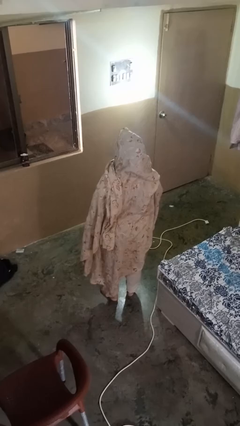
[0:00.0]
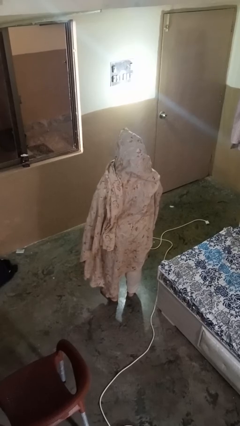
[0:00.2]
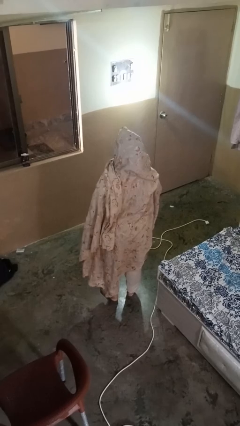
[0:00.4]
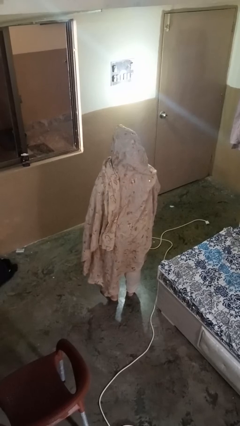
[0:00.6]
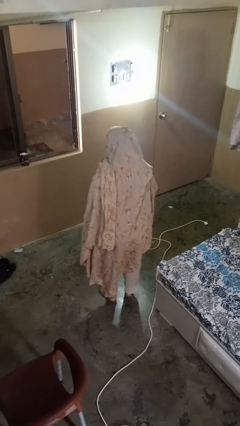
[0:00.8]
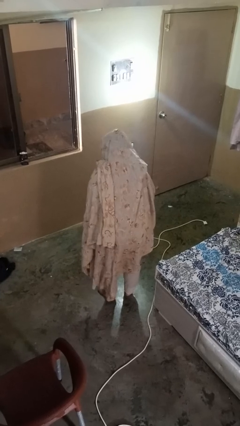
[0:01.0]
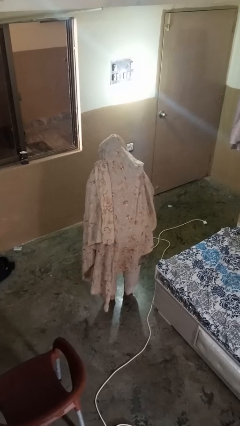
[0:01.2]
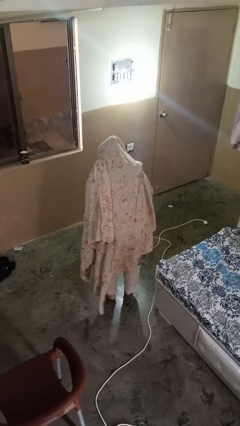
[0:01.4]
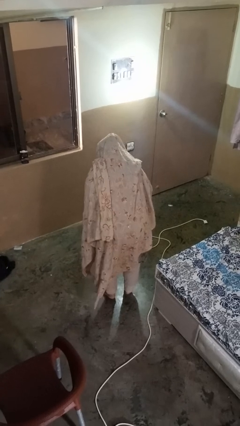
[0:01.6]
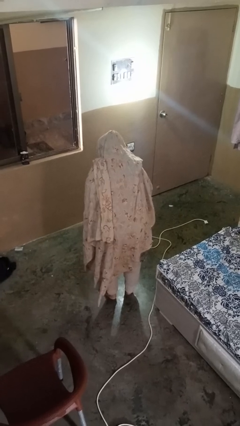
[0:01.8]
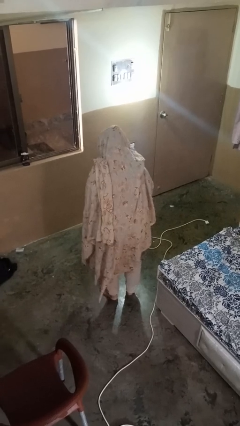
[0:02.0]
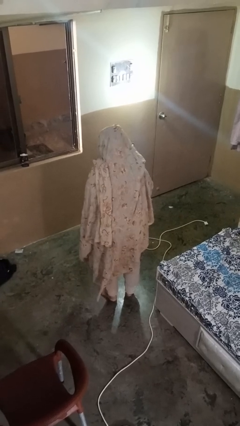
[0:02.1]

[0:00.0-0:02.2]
person bows

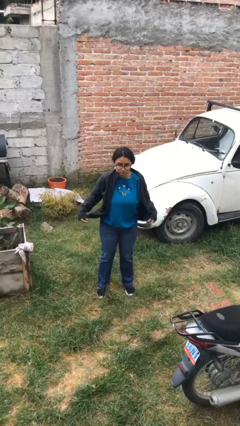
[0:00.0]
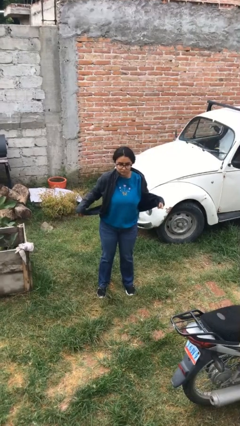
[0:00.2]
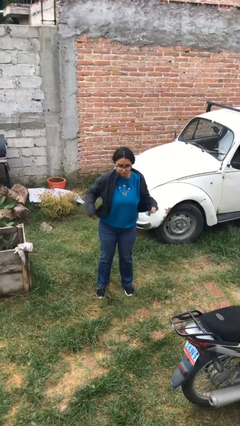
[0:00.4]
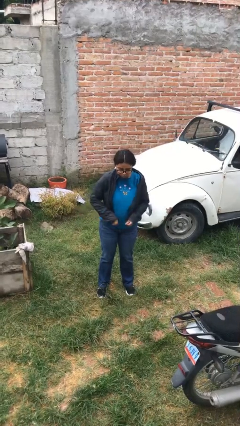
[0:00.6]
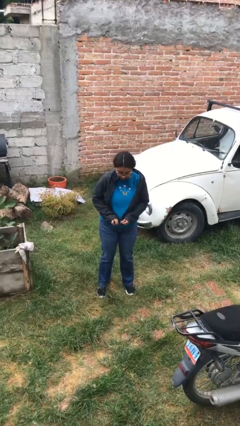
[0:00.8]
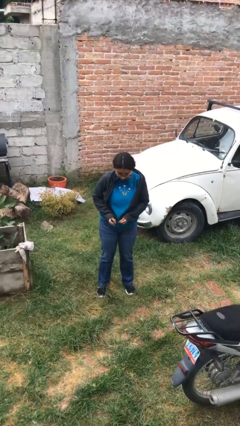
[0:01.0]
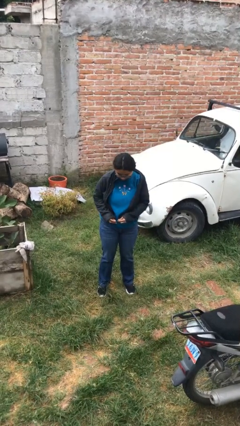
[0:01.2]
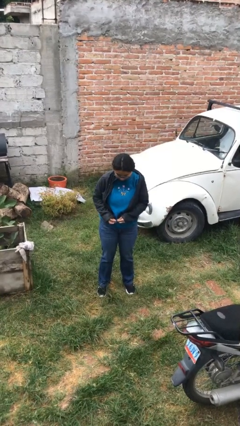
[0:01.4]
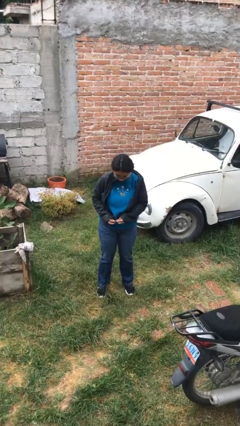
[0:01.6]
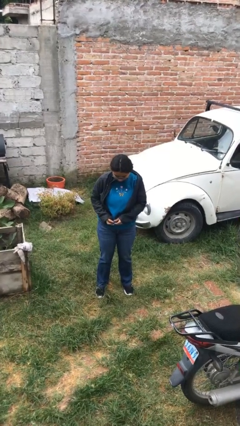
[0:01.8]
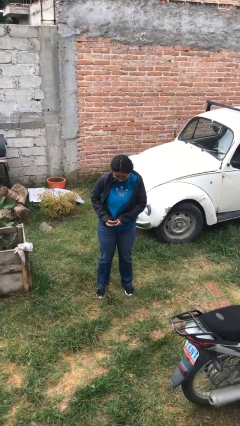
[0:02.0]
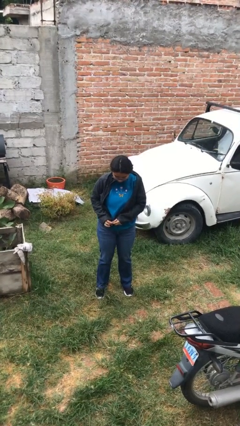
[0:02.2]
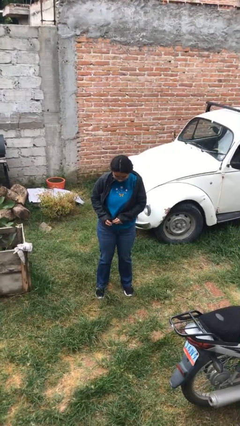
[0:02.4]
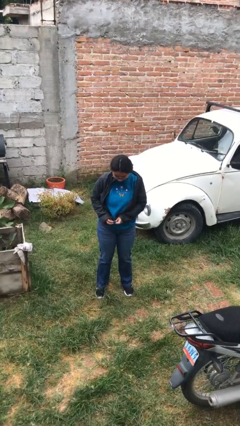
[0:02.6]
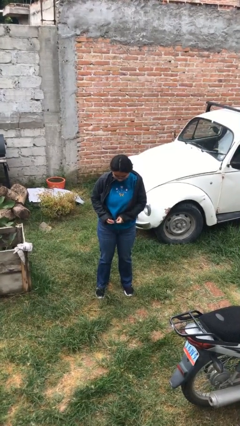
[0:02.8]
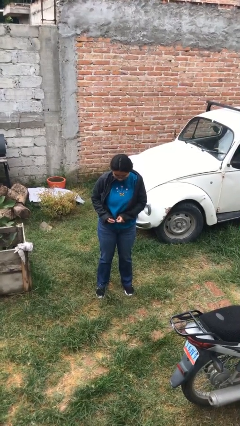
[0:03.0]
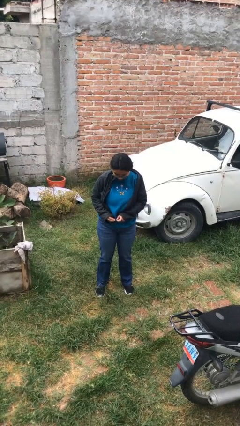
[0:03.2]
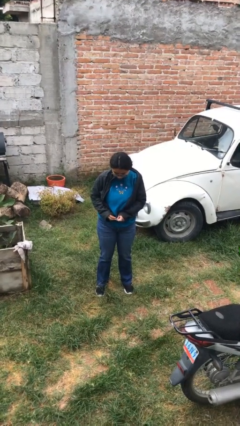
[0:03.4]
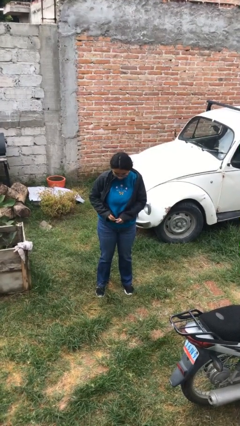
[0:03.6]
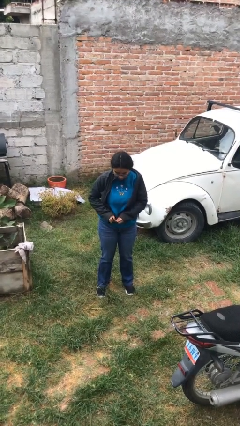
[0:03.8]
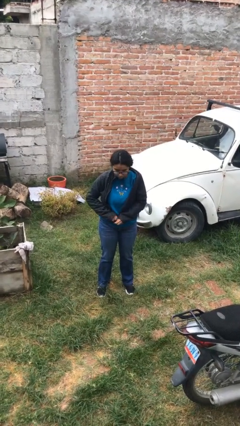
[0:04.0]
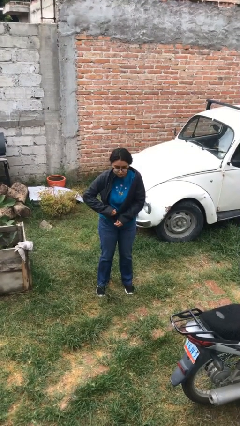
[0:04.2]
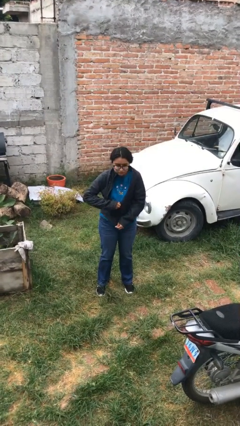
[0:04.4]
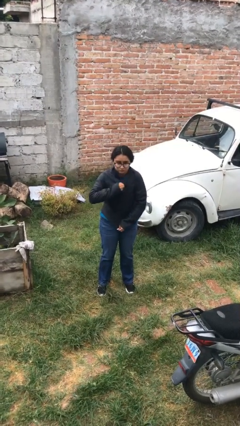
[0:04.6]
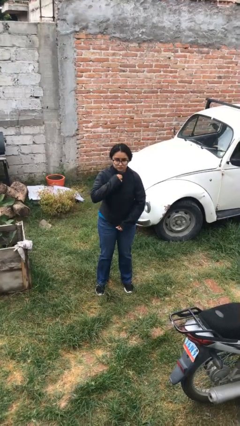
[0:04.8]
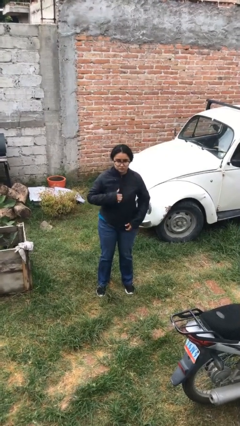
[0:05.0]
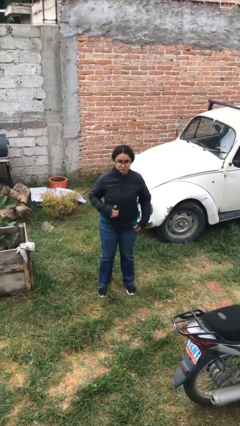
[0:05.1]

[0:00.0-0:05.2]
person zips up jacket

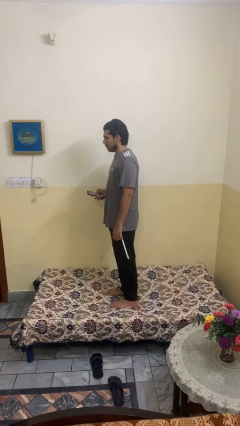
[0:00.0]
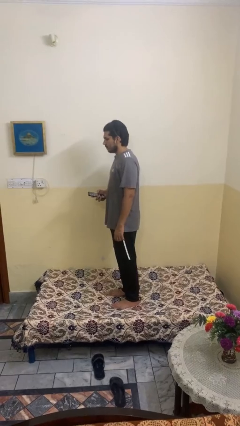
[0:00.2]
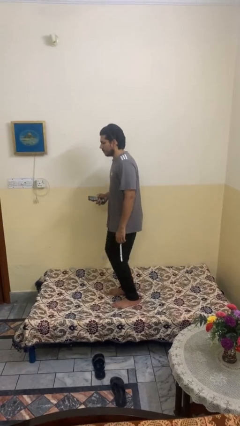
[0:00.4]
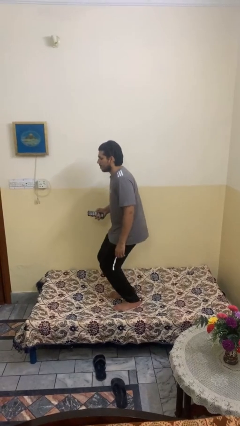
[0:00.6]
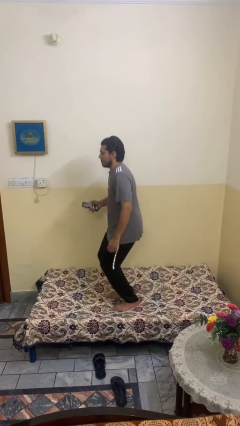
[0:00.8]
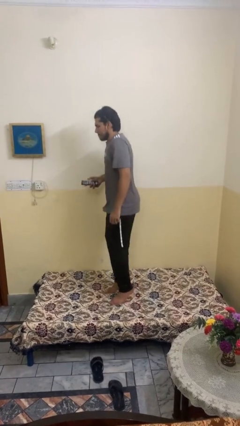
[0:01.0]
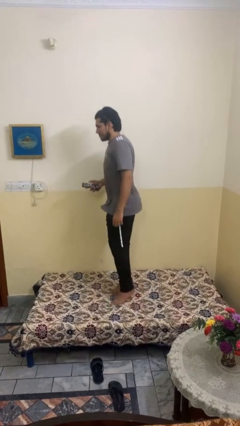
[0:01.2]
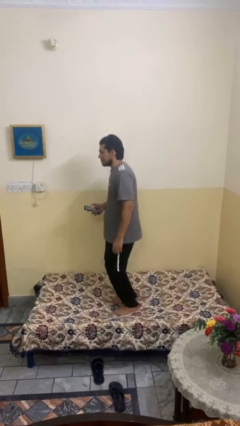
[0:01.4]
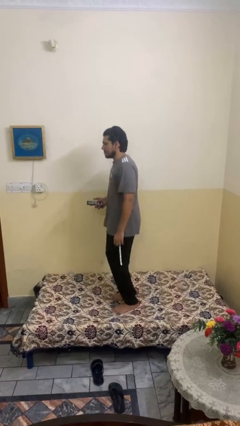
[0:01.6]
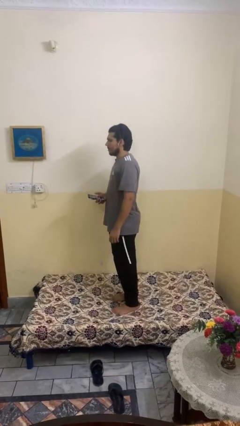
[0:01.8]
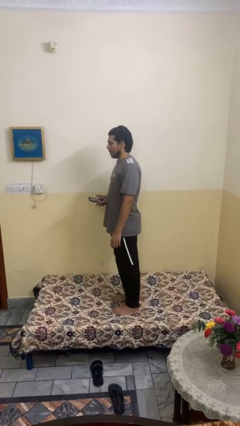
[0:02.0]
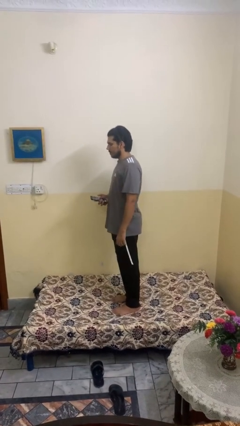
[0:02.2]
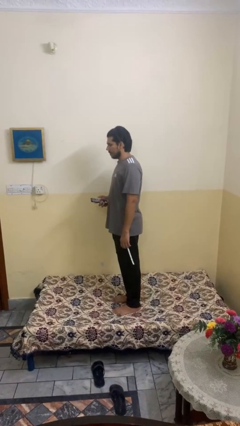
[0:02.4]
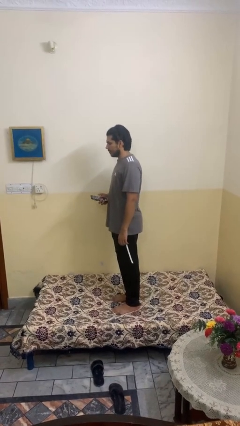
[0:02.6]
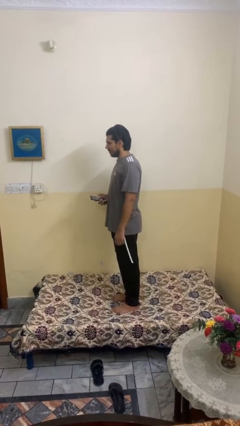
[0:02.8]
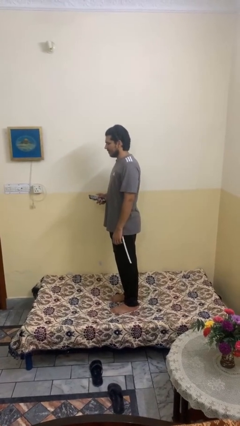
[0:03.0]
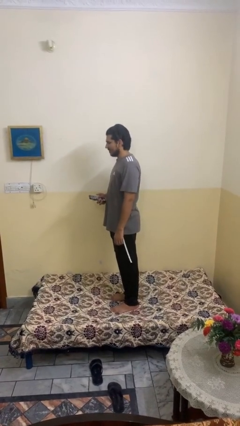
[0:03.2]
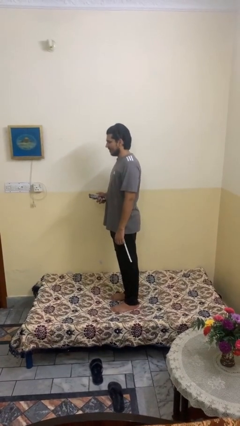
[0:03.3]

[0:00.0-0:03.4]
person jumps on couch

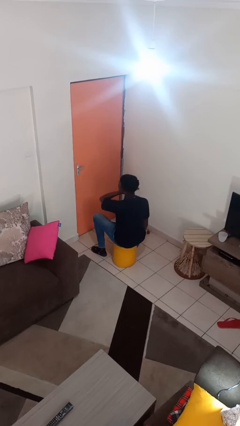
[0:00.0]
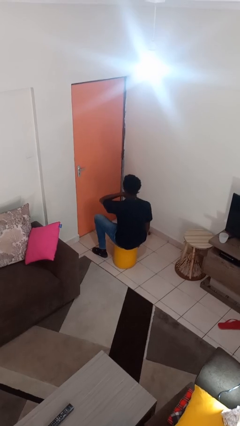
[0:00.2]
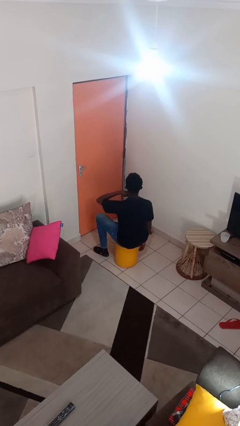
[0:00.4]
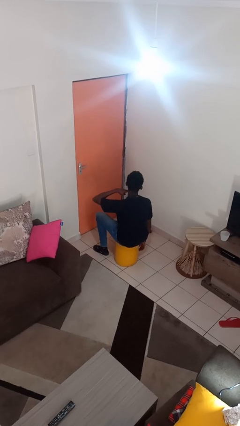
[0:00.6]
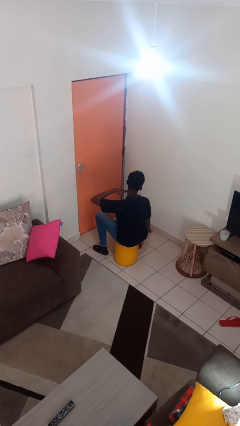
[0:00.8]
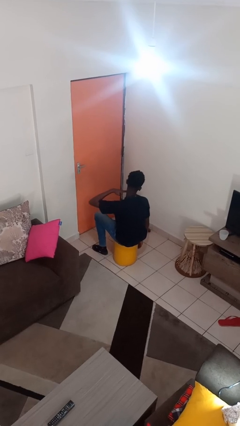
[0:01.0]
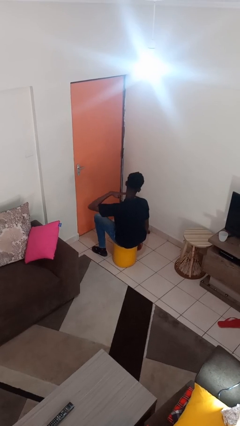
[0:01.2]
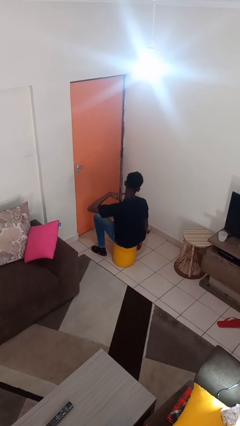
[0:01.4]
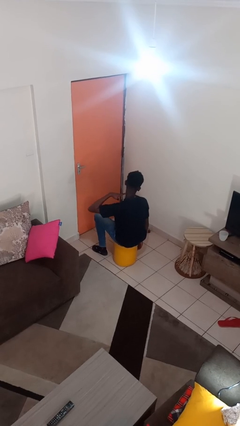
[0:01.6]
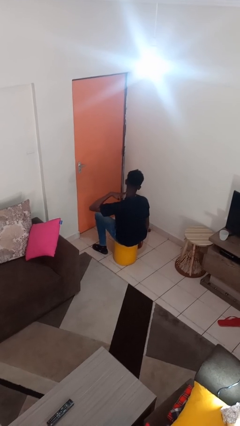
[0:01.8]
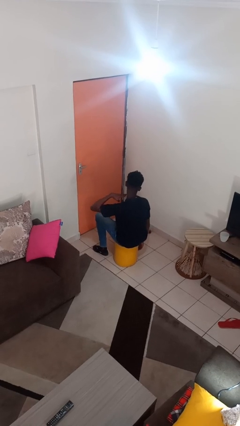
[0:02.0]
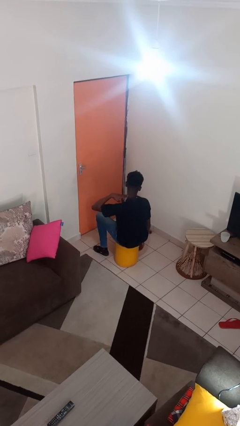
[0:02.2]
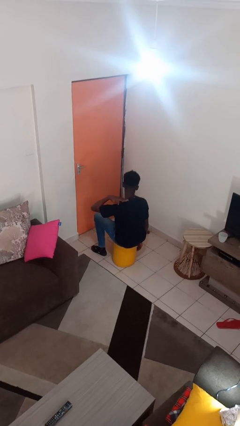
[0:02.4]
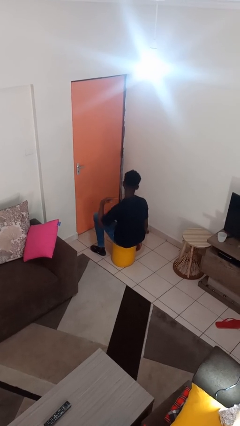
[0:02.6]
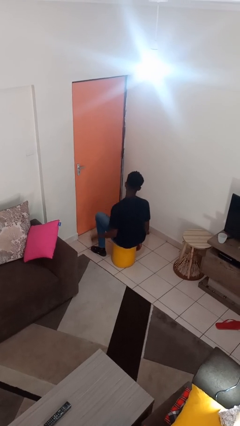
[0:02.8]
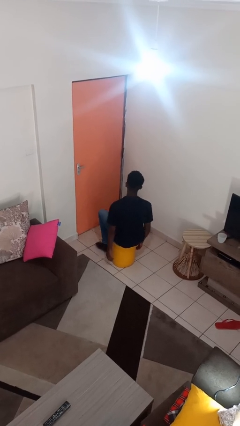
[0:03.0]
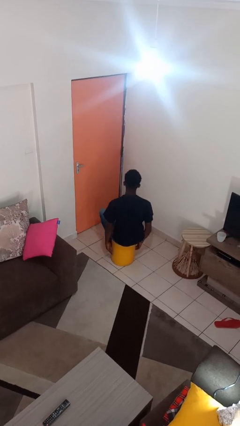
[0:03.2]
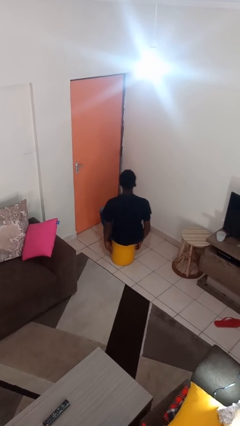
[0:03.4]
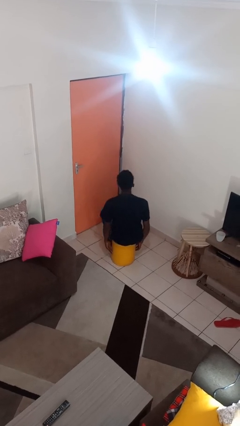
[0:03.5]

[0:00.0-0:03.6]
person gestures cut

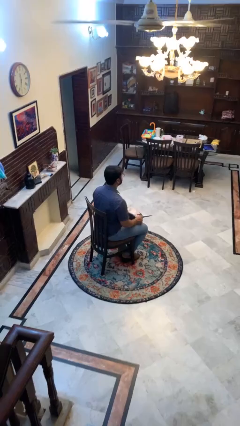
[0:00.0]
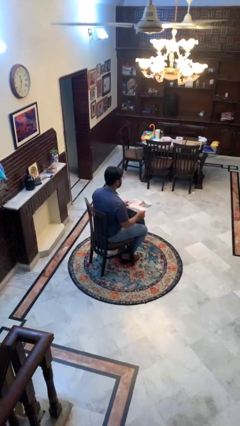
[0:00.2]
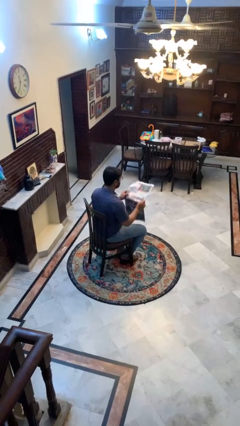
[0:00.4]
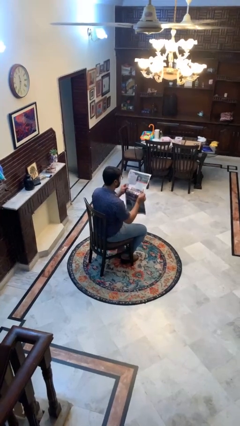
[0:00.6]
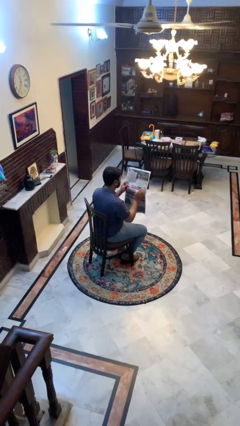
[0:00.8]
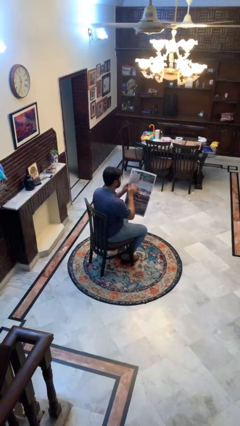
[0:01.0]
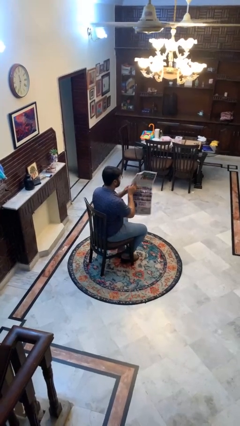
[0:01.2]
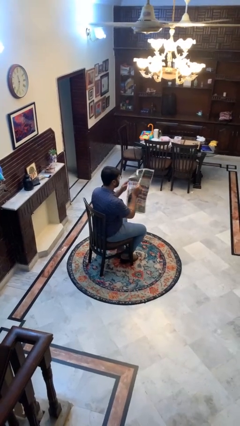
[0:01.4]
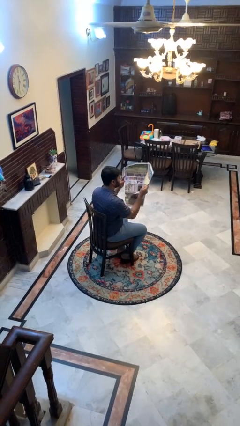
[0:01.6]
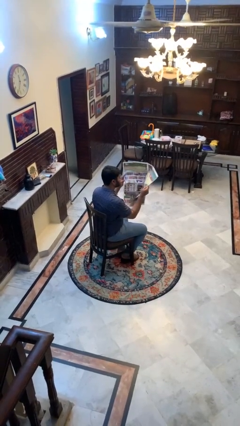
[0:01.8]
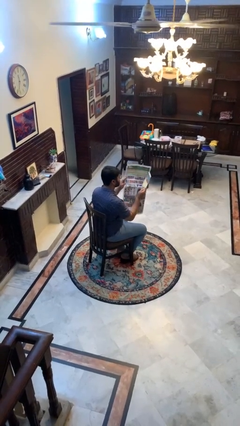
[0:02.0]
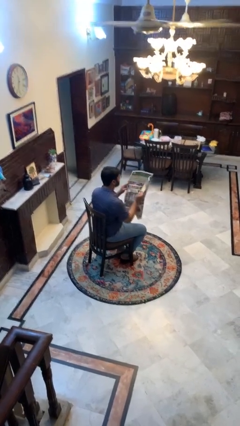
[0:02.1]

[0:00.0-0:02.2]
person reads newspaper

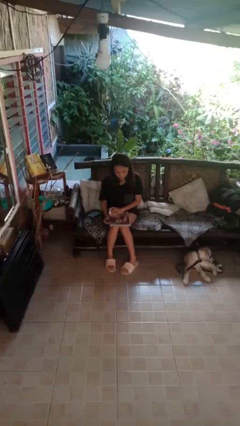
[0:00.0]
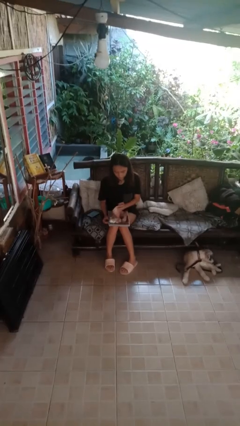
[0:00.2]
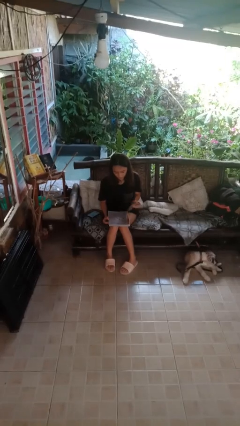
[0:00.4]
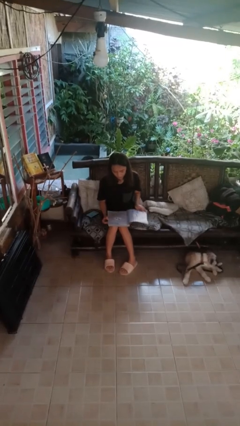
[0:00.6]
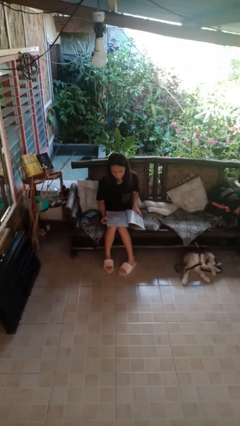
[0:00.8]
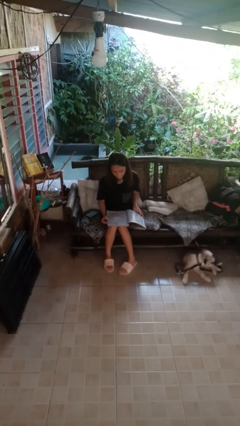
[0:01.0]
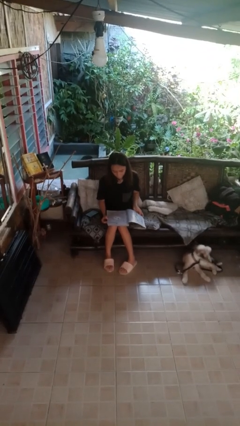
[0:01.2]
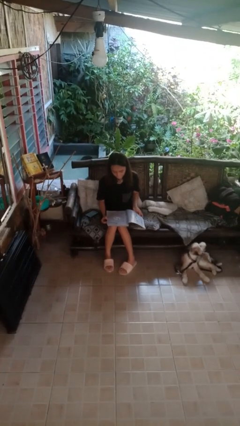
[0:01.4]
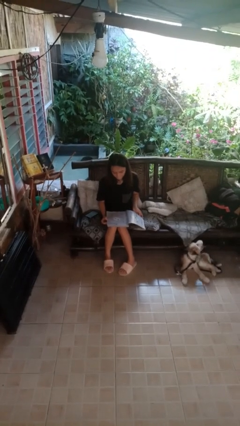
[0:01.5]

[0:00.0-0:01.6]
person reads magazine
